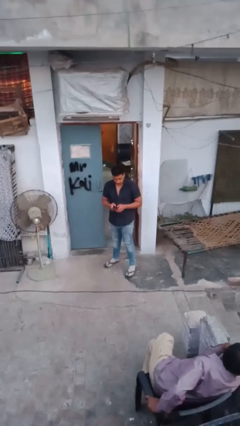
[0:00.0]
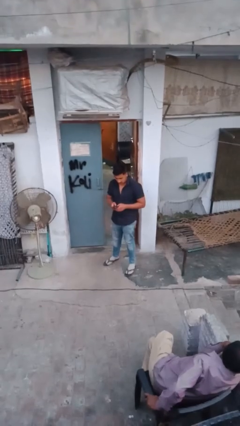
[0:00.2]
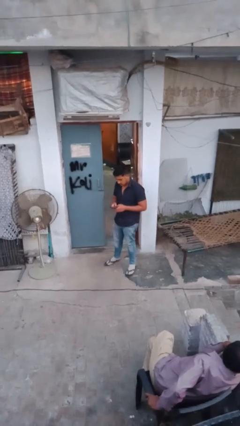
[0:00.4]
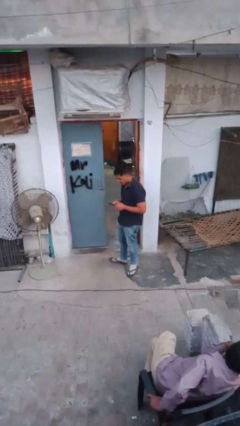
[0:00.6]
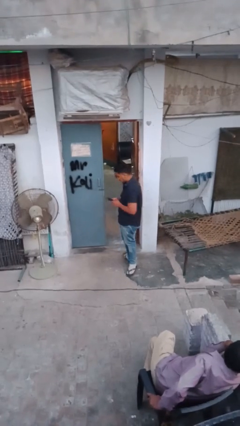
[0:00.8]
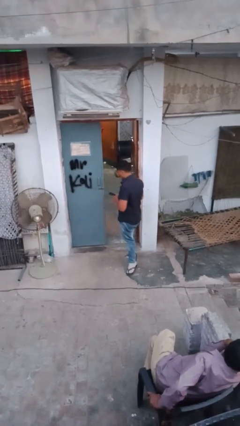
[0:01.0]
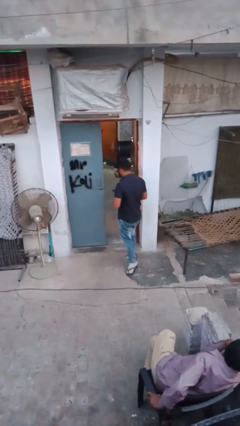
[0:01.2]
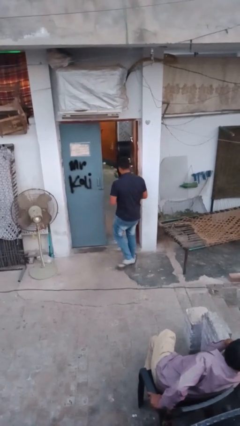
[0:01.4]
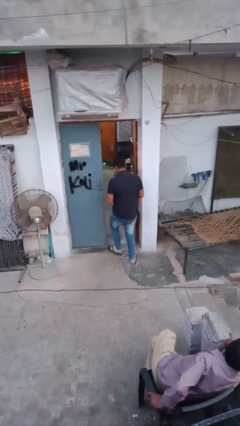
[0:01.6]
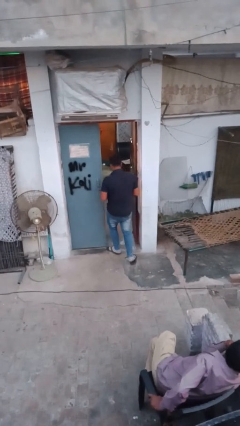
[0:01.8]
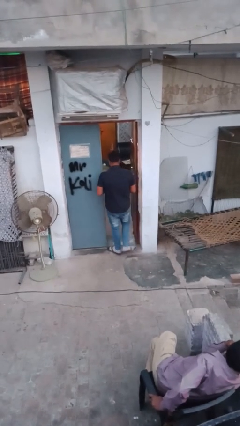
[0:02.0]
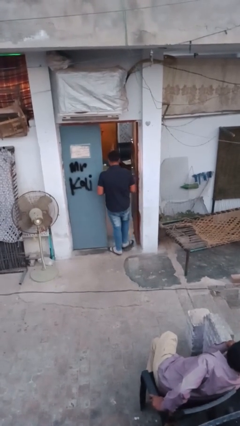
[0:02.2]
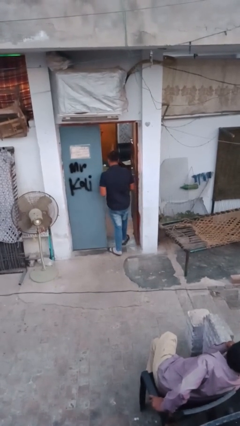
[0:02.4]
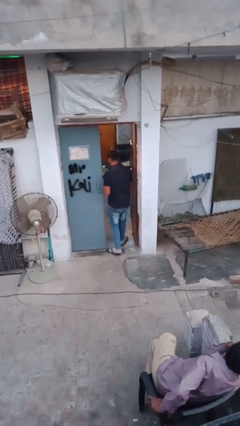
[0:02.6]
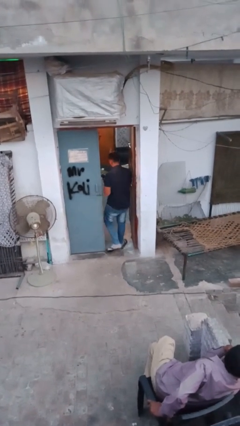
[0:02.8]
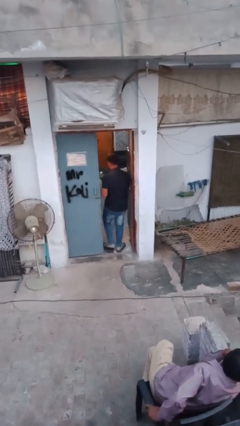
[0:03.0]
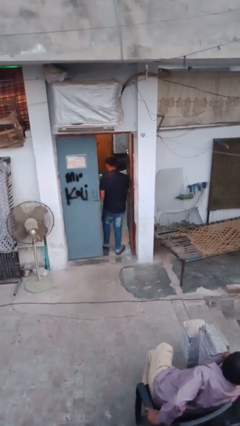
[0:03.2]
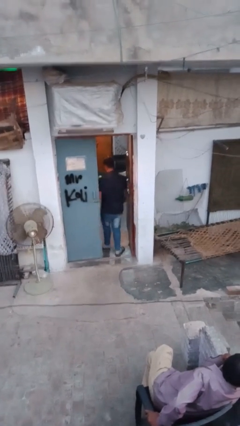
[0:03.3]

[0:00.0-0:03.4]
person exits scene through structure

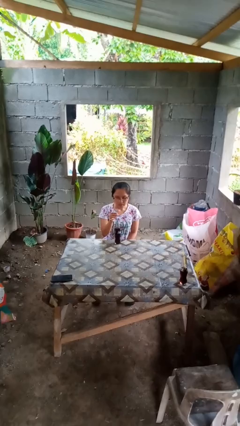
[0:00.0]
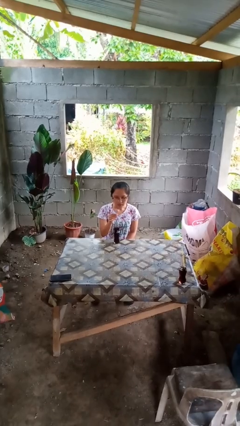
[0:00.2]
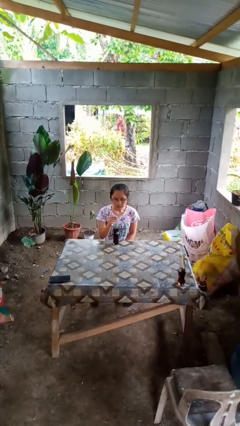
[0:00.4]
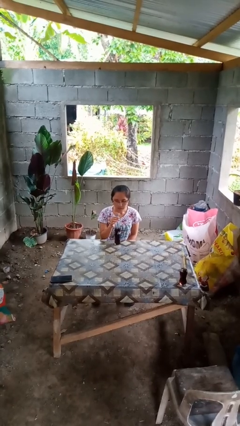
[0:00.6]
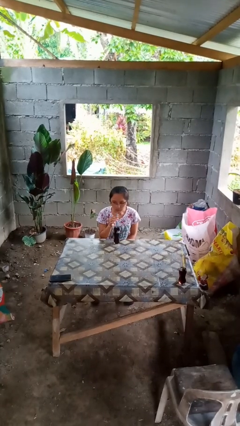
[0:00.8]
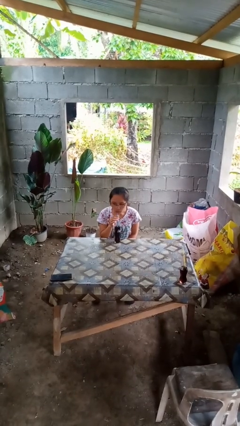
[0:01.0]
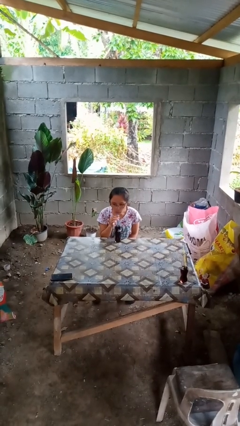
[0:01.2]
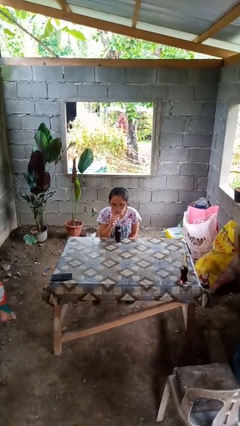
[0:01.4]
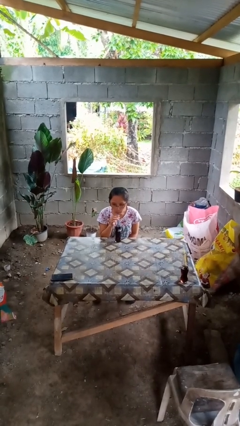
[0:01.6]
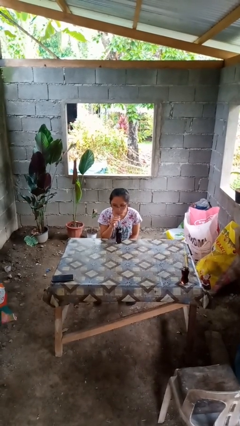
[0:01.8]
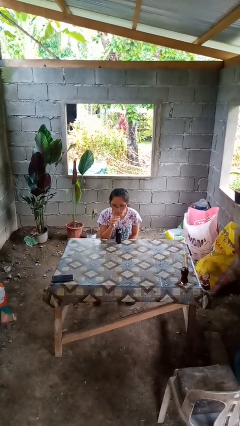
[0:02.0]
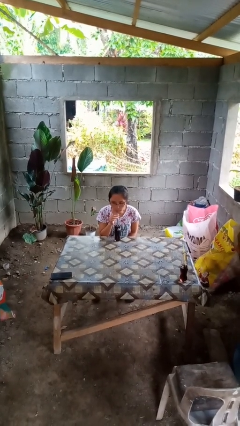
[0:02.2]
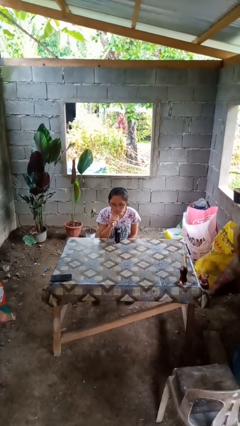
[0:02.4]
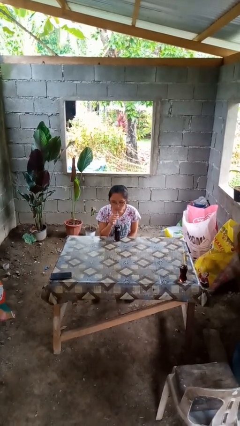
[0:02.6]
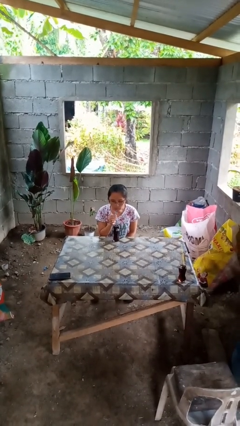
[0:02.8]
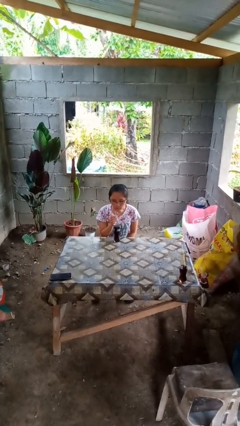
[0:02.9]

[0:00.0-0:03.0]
person drinks from straw

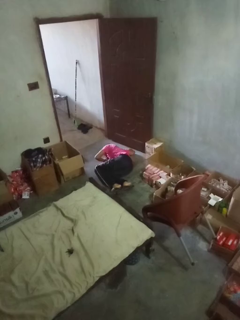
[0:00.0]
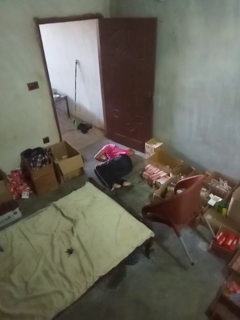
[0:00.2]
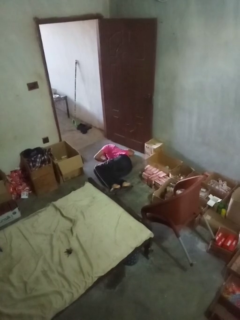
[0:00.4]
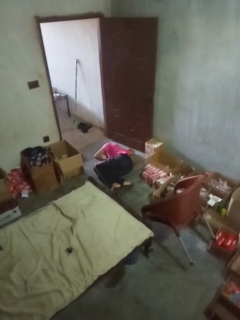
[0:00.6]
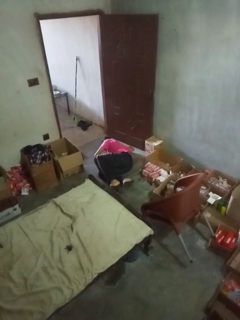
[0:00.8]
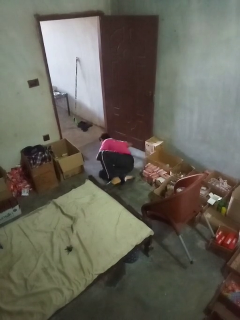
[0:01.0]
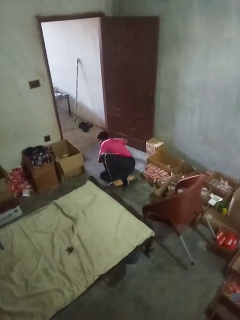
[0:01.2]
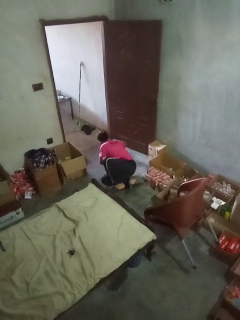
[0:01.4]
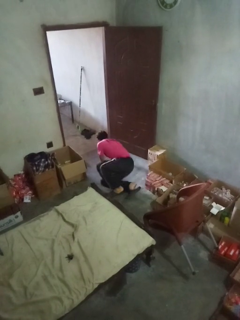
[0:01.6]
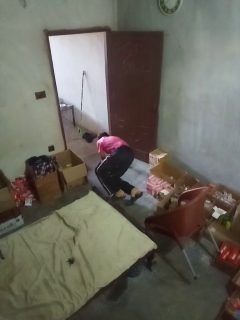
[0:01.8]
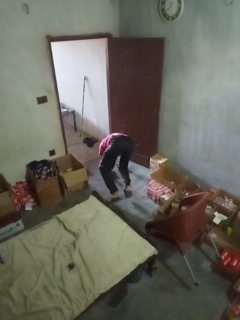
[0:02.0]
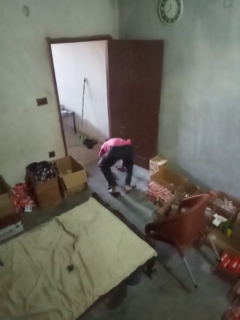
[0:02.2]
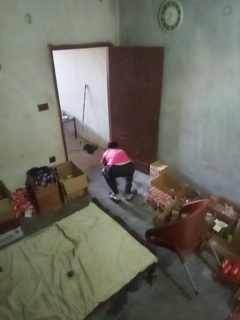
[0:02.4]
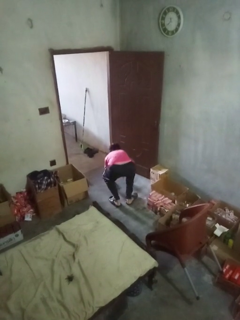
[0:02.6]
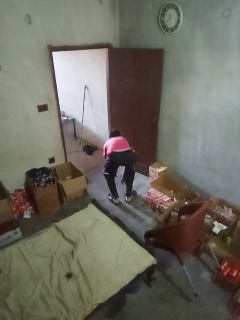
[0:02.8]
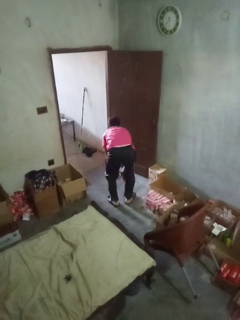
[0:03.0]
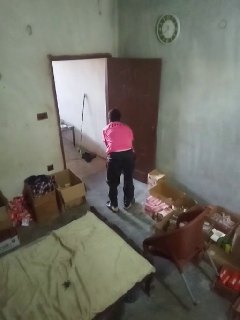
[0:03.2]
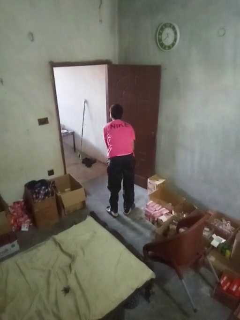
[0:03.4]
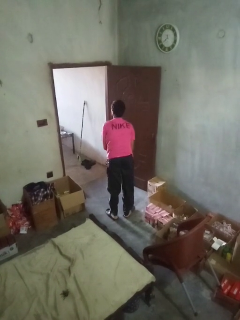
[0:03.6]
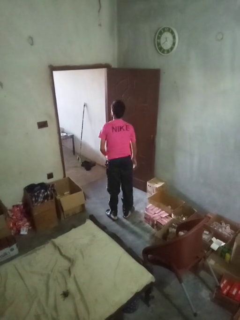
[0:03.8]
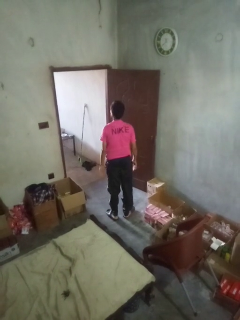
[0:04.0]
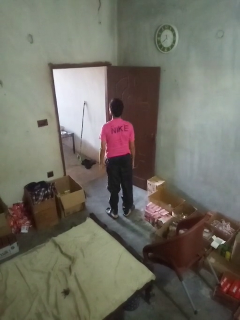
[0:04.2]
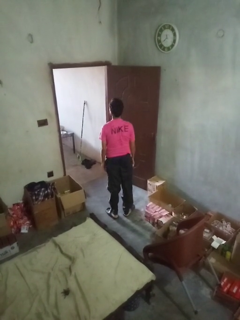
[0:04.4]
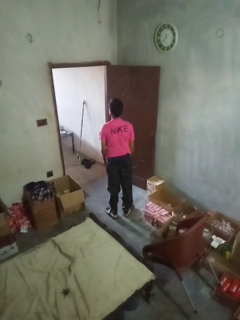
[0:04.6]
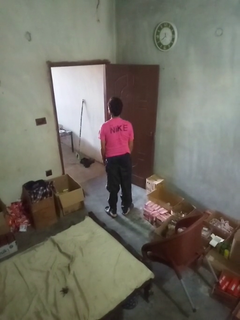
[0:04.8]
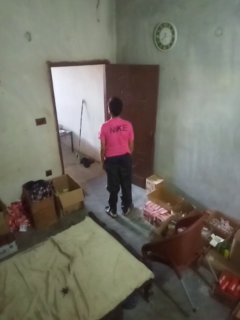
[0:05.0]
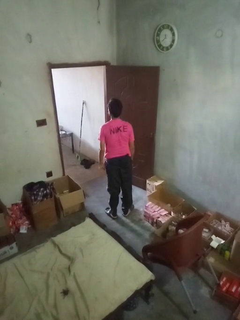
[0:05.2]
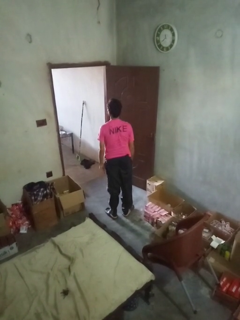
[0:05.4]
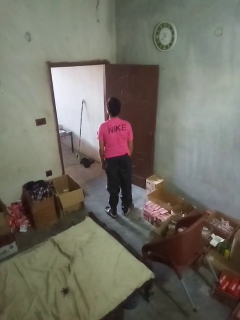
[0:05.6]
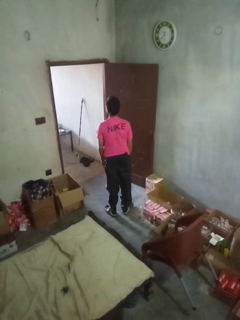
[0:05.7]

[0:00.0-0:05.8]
person stands up from floor

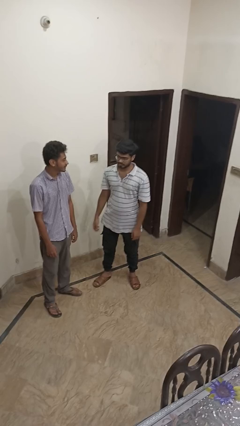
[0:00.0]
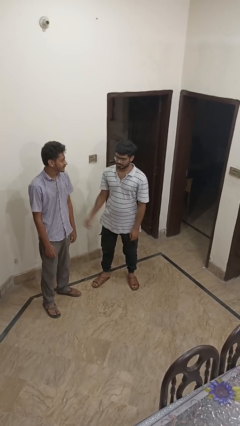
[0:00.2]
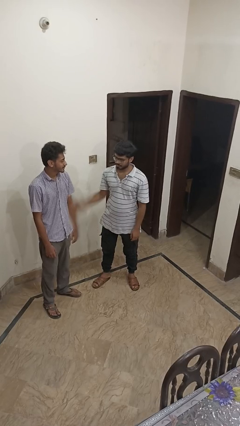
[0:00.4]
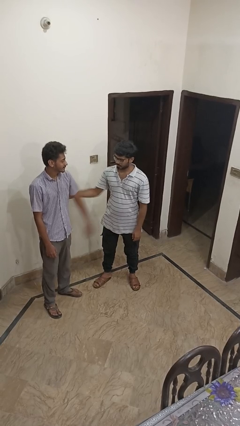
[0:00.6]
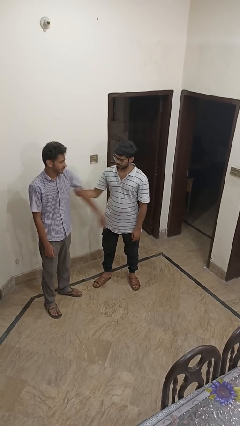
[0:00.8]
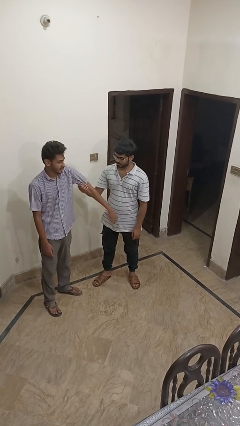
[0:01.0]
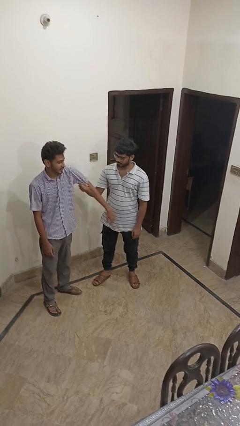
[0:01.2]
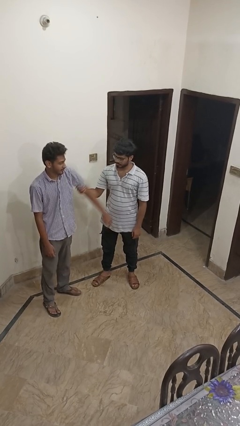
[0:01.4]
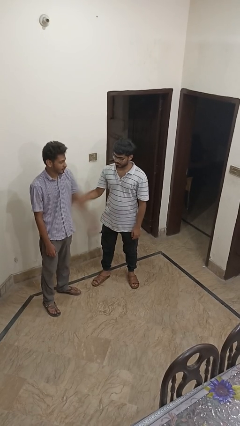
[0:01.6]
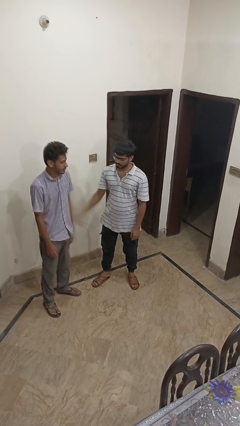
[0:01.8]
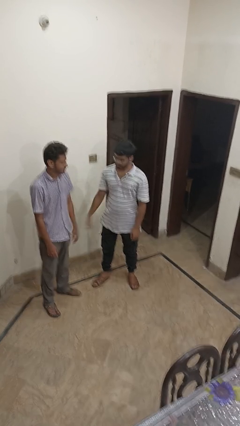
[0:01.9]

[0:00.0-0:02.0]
person grabs person by bicep

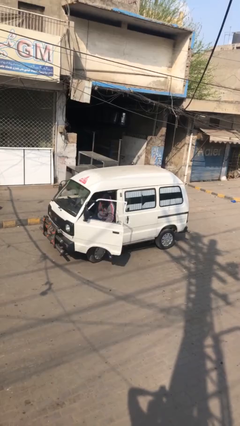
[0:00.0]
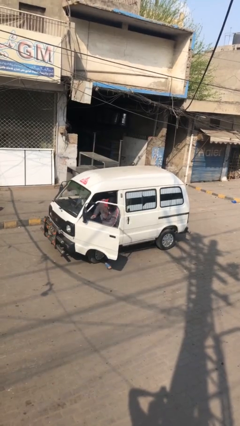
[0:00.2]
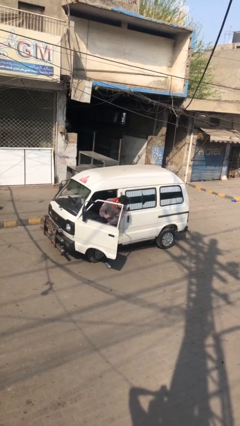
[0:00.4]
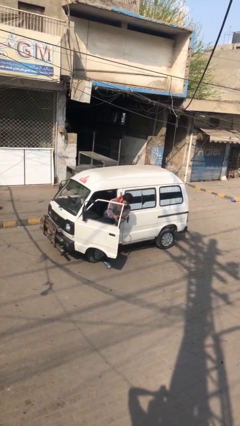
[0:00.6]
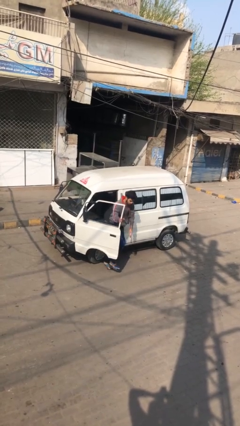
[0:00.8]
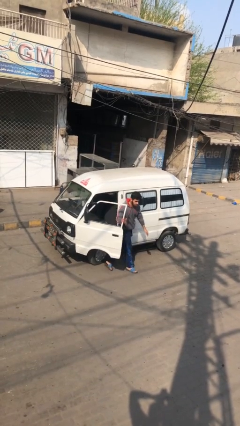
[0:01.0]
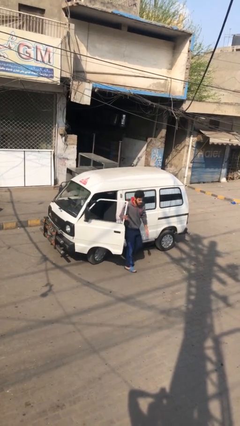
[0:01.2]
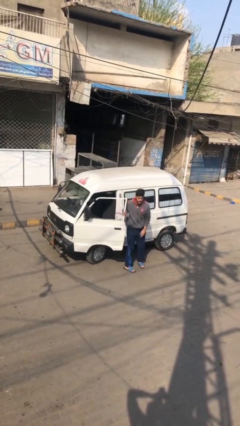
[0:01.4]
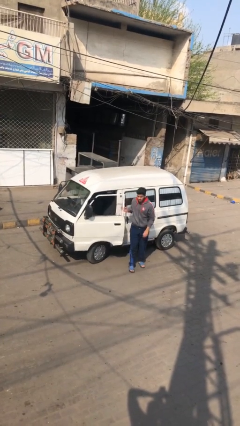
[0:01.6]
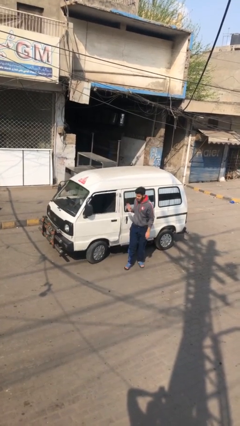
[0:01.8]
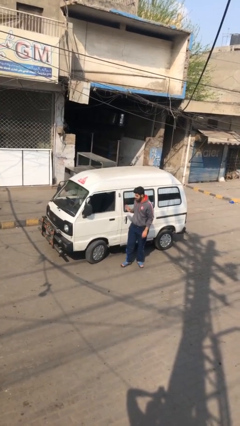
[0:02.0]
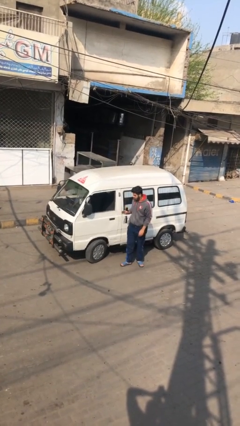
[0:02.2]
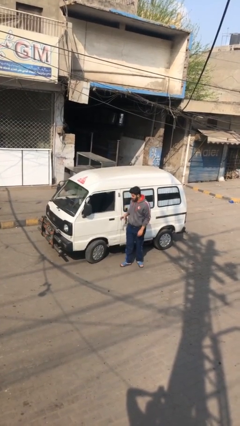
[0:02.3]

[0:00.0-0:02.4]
car drops off person

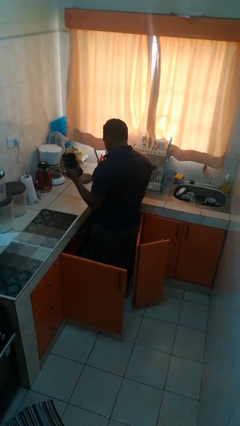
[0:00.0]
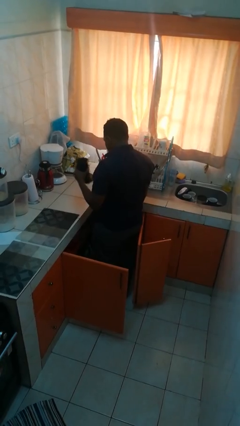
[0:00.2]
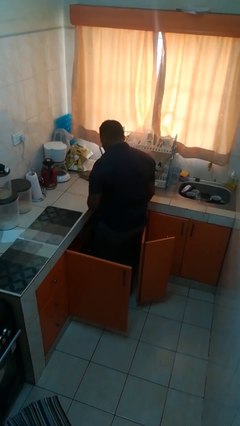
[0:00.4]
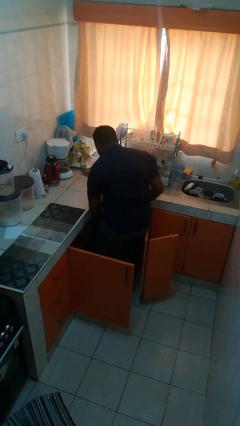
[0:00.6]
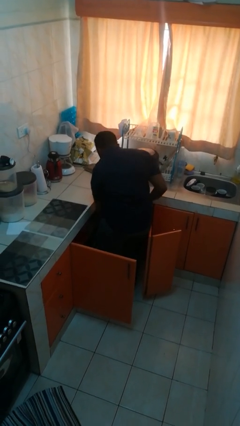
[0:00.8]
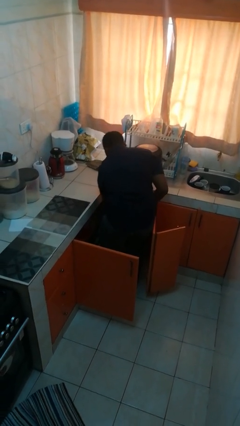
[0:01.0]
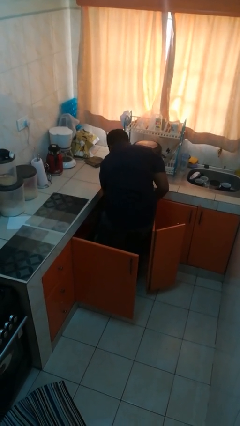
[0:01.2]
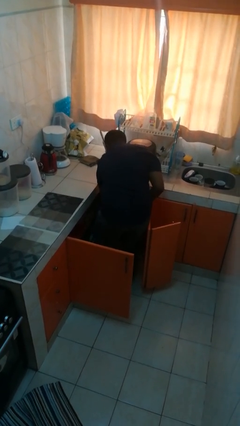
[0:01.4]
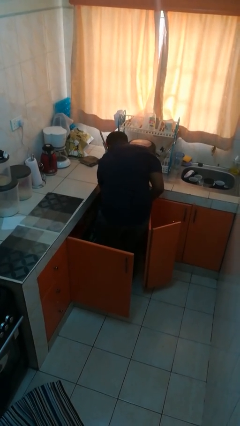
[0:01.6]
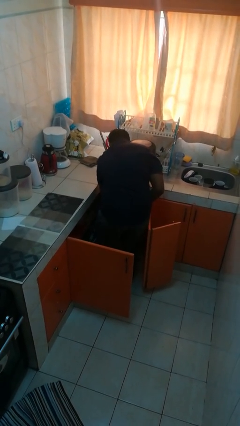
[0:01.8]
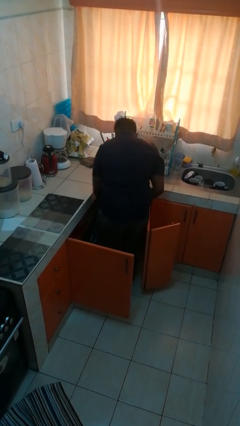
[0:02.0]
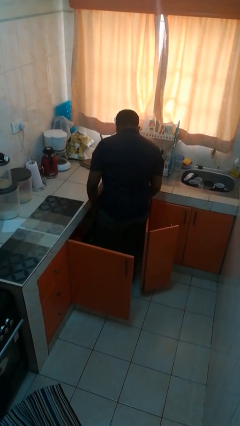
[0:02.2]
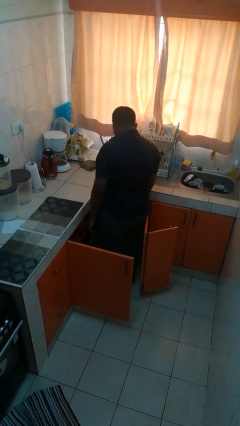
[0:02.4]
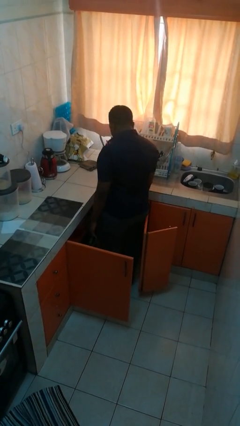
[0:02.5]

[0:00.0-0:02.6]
person puts object in cabinet
